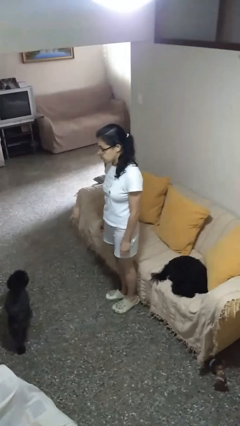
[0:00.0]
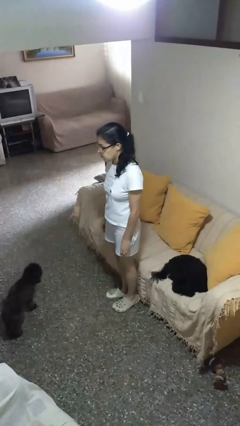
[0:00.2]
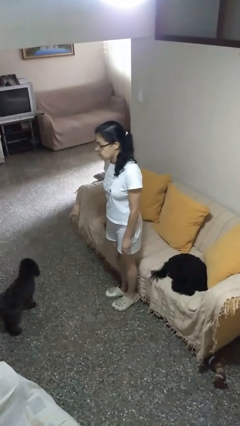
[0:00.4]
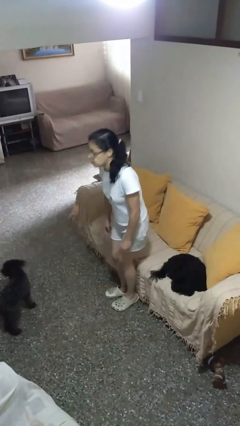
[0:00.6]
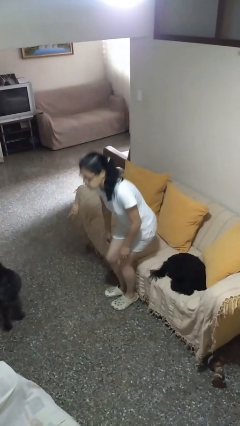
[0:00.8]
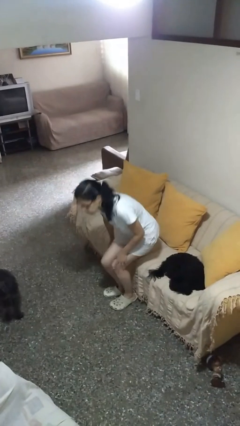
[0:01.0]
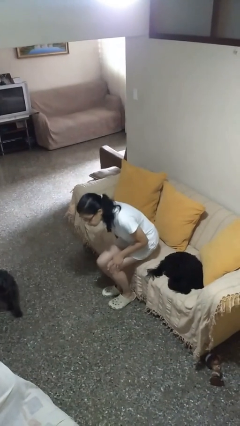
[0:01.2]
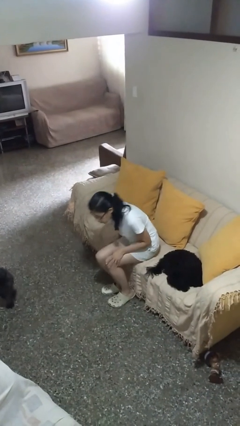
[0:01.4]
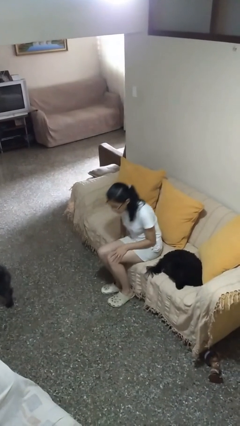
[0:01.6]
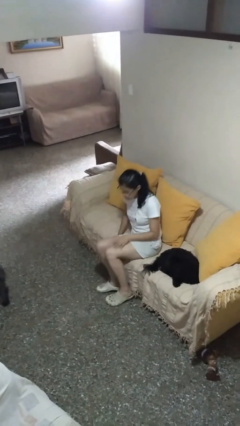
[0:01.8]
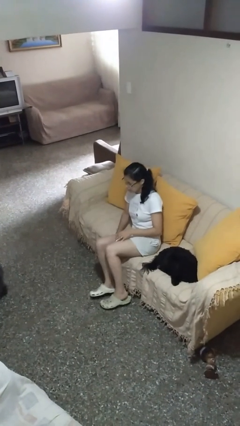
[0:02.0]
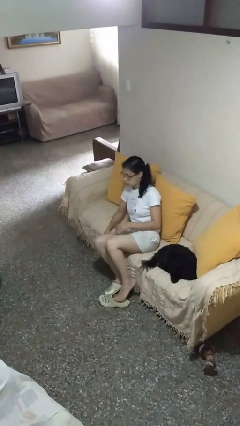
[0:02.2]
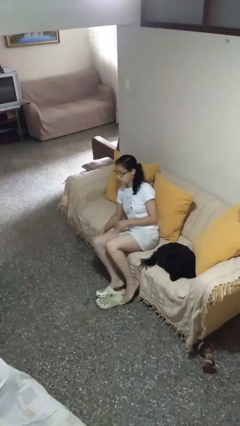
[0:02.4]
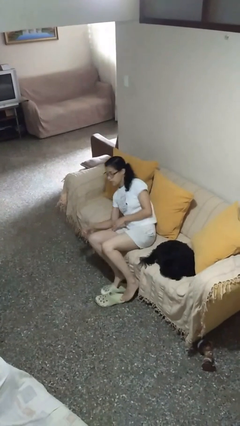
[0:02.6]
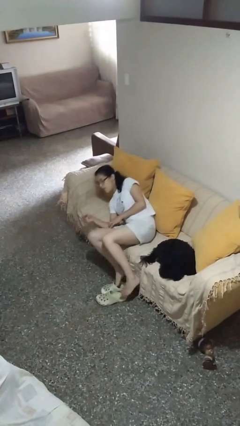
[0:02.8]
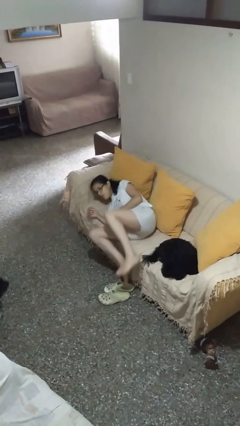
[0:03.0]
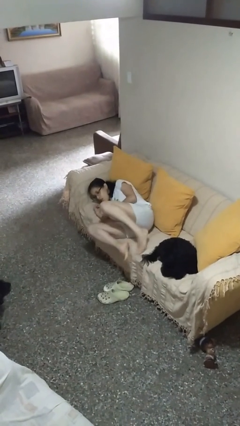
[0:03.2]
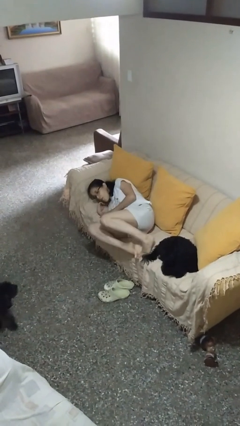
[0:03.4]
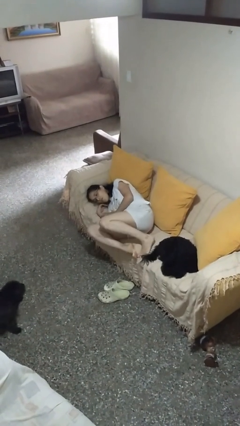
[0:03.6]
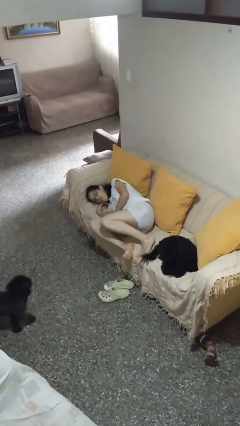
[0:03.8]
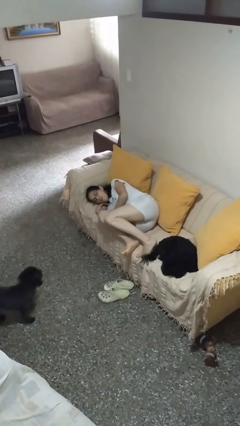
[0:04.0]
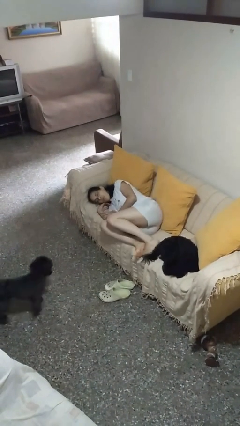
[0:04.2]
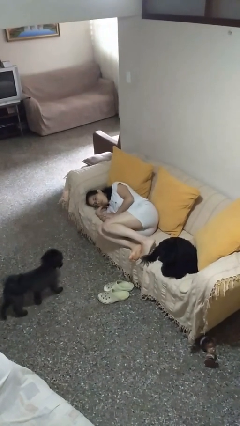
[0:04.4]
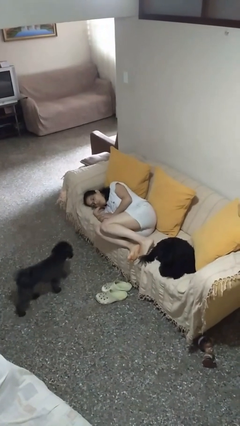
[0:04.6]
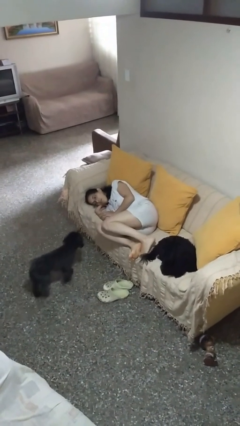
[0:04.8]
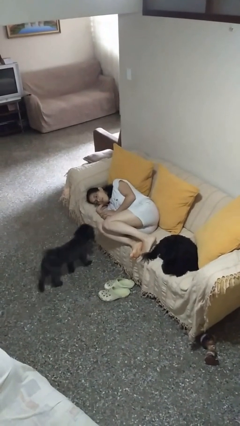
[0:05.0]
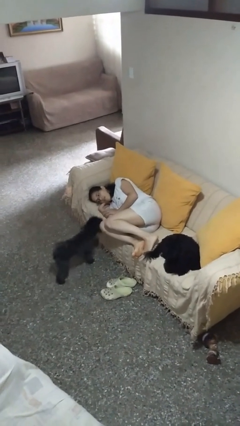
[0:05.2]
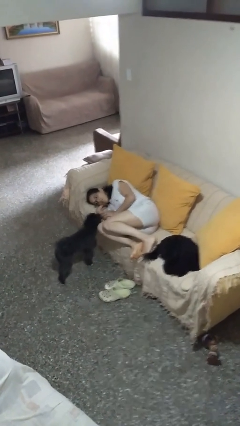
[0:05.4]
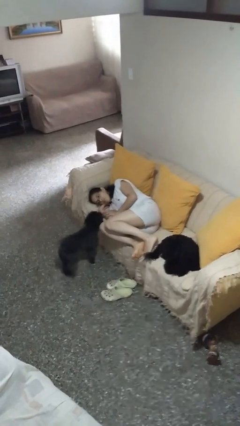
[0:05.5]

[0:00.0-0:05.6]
person lies down on couch

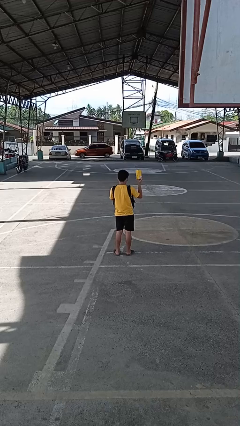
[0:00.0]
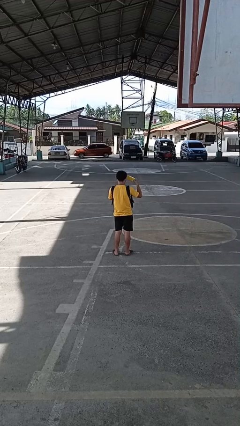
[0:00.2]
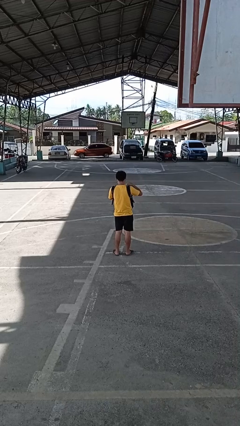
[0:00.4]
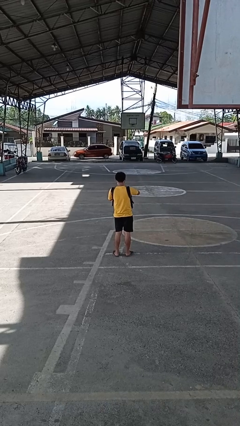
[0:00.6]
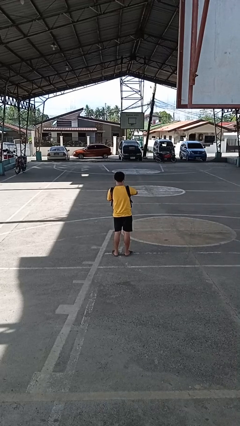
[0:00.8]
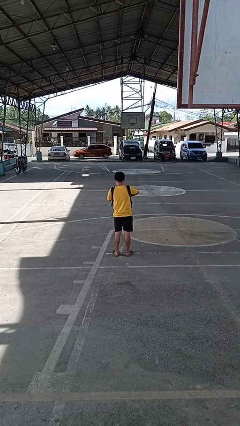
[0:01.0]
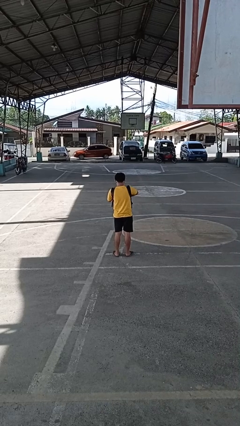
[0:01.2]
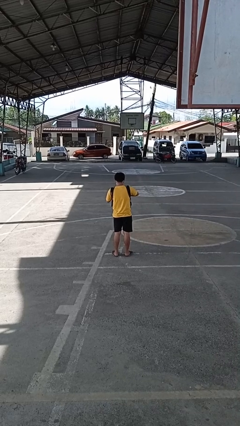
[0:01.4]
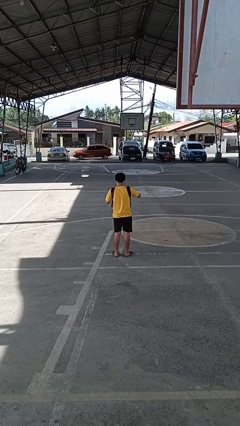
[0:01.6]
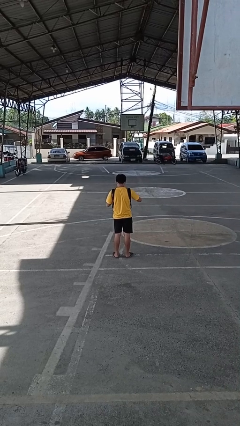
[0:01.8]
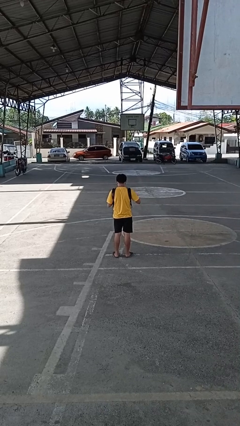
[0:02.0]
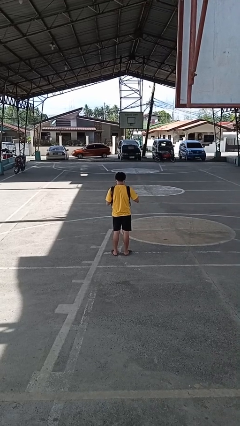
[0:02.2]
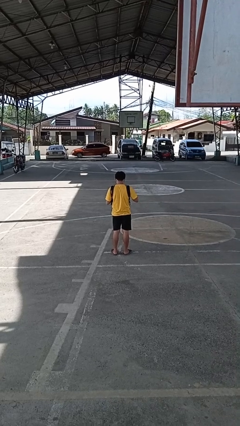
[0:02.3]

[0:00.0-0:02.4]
person puts object into backpack

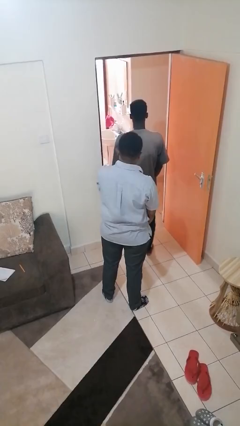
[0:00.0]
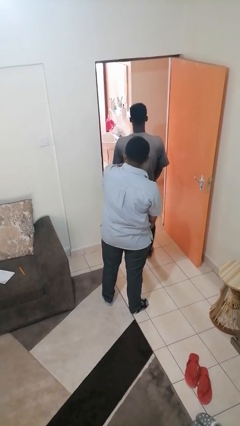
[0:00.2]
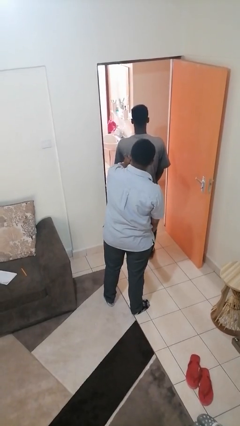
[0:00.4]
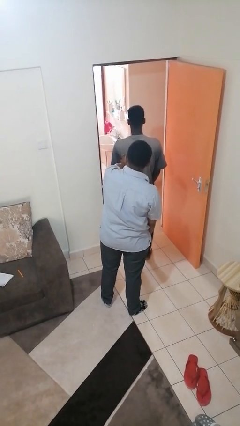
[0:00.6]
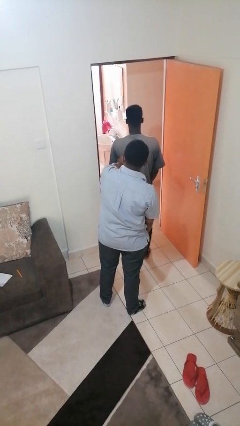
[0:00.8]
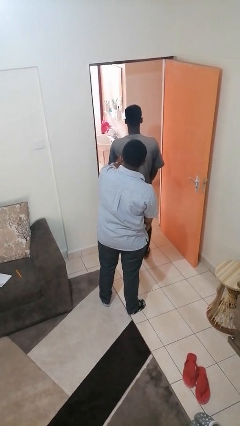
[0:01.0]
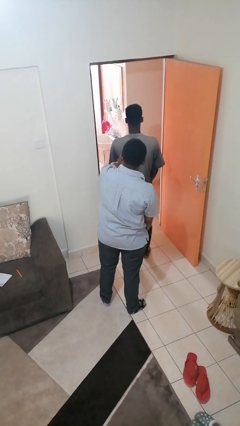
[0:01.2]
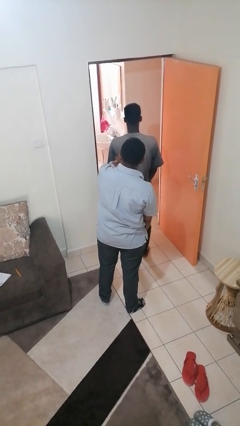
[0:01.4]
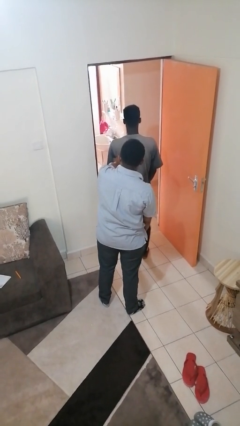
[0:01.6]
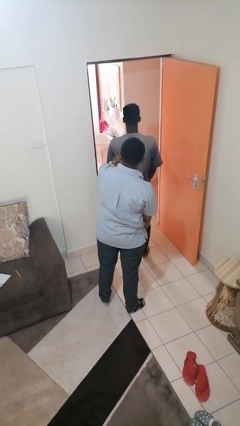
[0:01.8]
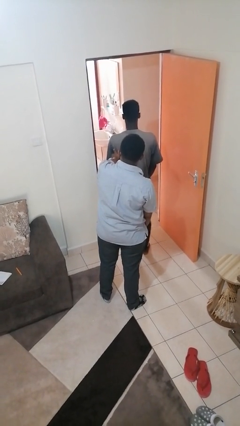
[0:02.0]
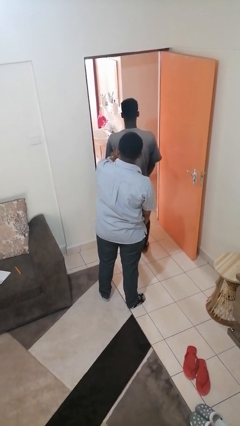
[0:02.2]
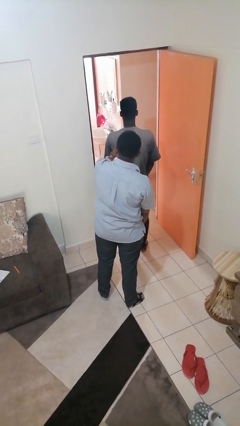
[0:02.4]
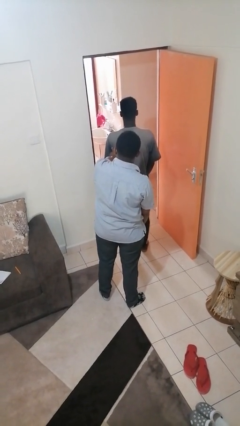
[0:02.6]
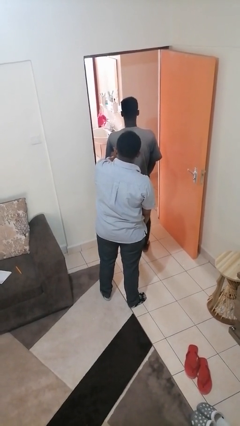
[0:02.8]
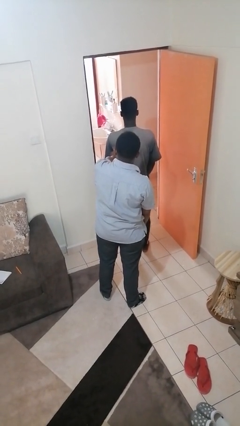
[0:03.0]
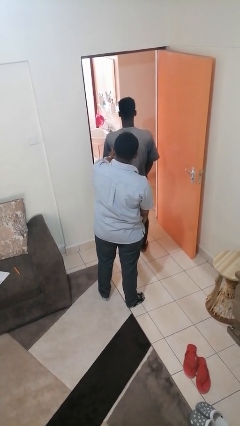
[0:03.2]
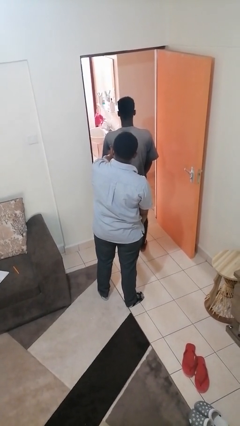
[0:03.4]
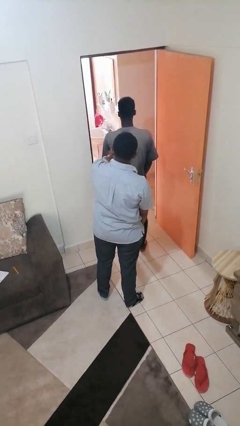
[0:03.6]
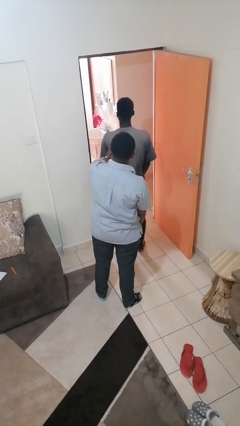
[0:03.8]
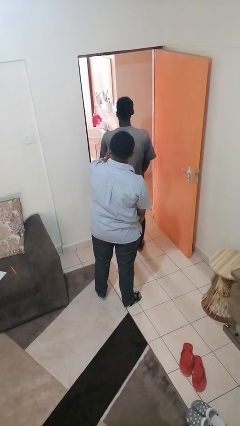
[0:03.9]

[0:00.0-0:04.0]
person touches back of person

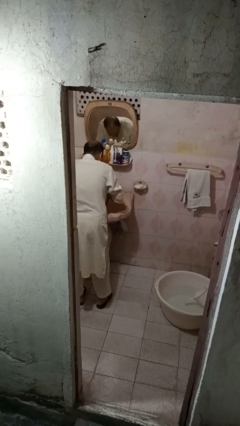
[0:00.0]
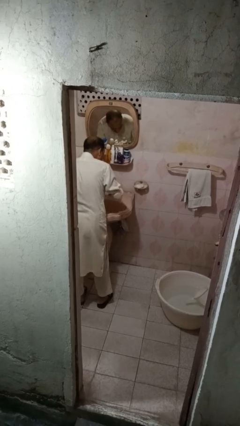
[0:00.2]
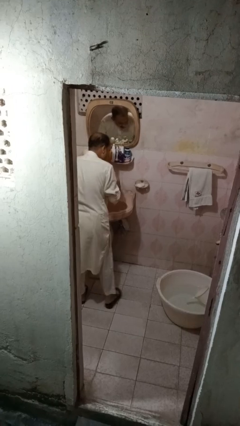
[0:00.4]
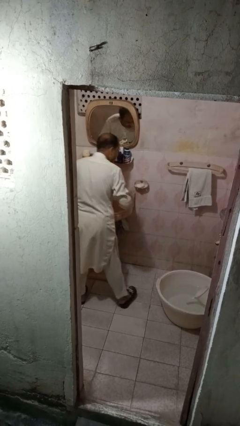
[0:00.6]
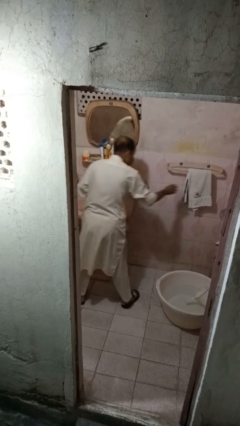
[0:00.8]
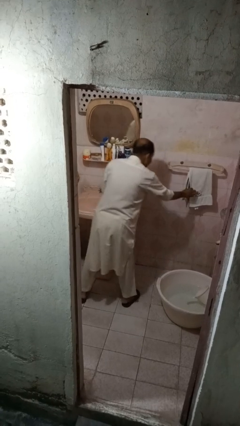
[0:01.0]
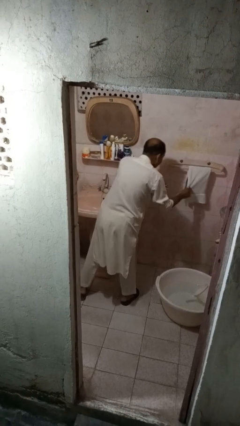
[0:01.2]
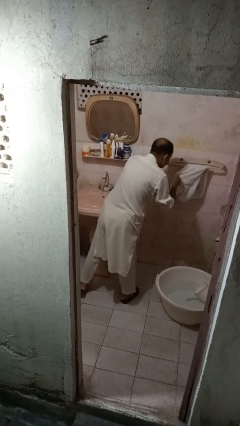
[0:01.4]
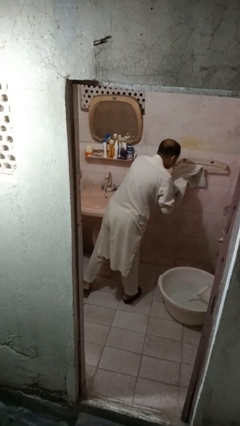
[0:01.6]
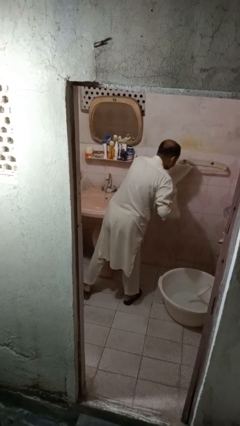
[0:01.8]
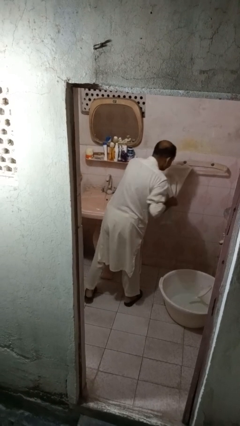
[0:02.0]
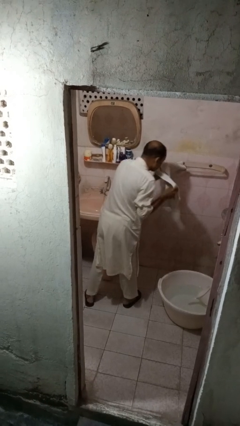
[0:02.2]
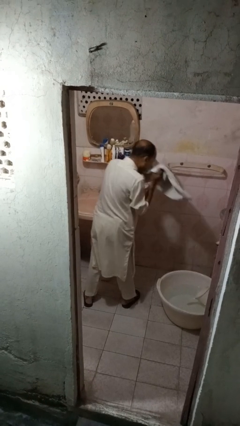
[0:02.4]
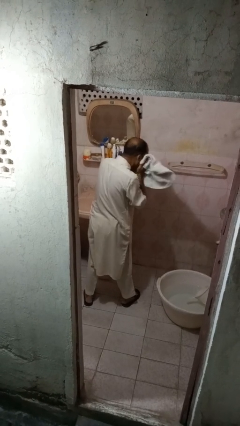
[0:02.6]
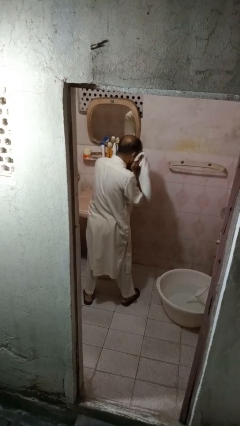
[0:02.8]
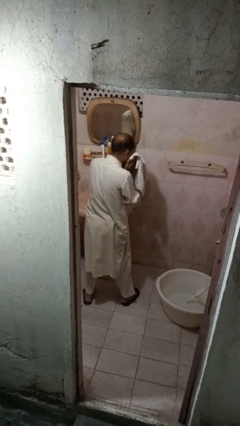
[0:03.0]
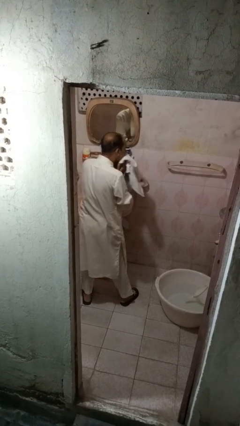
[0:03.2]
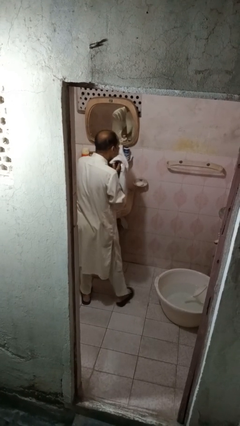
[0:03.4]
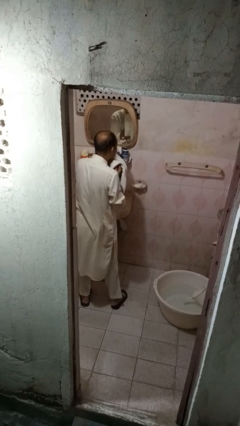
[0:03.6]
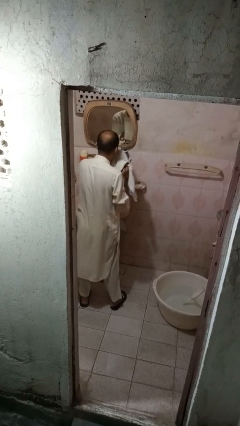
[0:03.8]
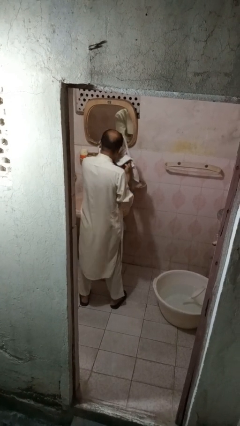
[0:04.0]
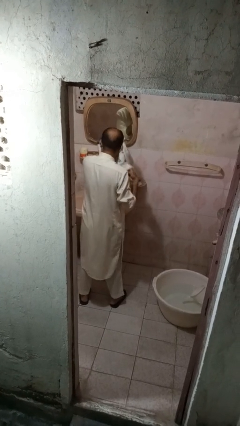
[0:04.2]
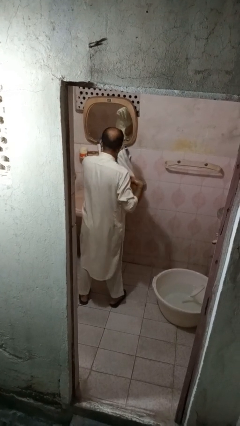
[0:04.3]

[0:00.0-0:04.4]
person dries face with towel

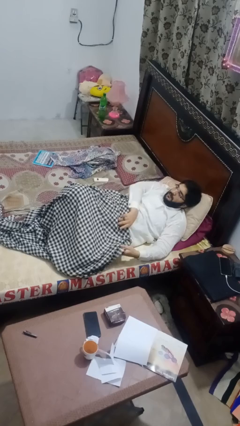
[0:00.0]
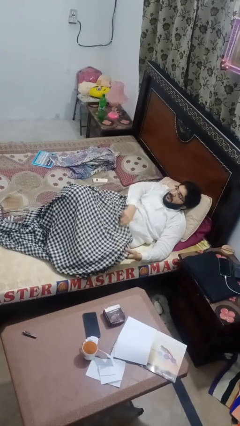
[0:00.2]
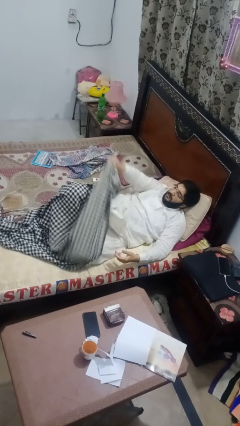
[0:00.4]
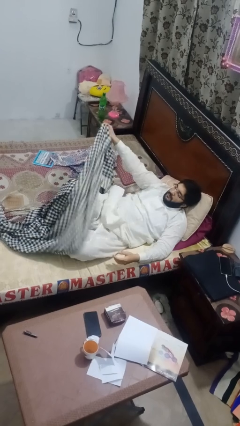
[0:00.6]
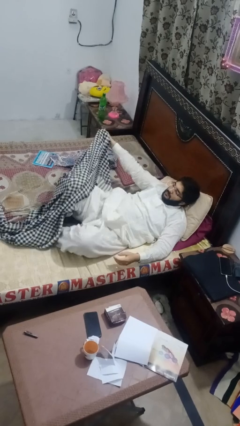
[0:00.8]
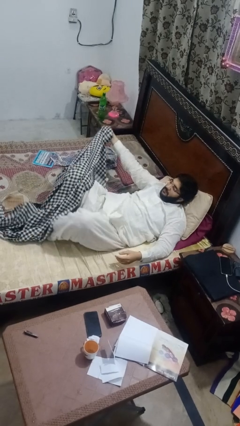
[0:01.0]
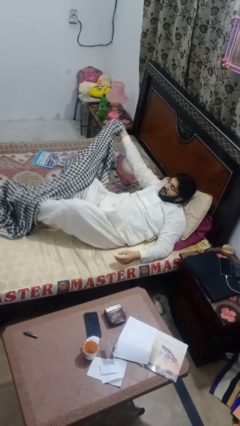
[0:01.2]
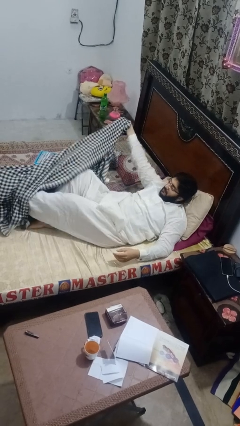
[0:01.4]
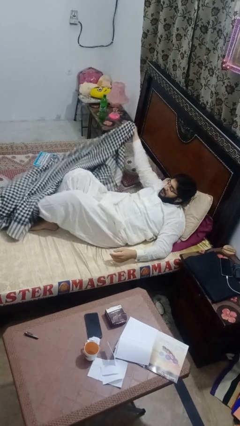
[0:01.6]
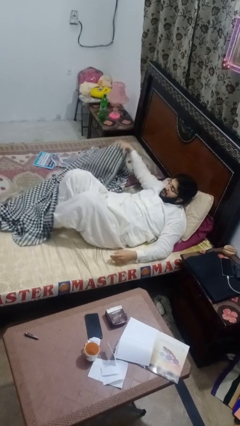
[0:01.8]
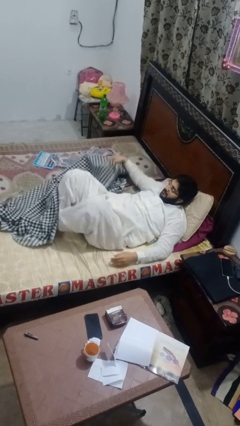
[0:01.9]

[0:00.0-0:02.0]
person uncovers with blanket
